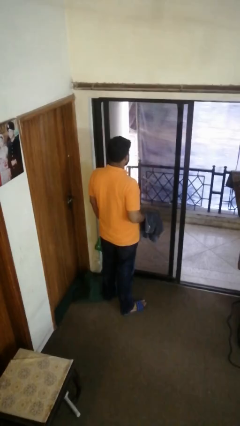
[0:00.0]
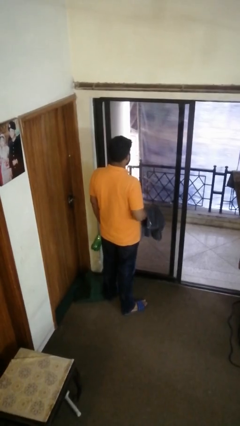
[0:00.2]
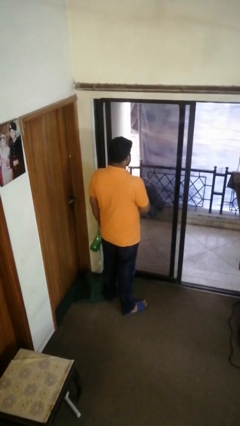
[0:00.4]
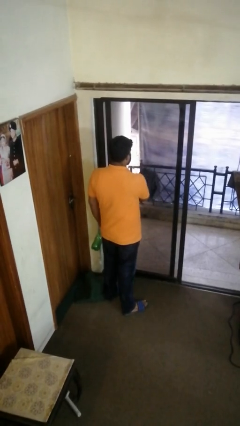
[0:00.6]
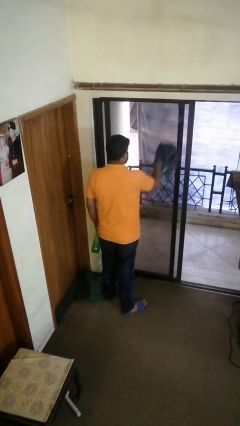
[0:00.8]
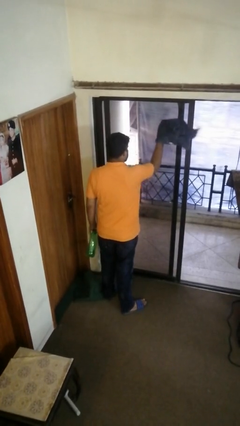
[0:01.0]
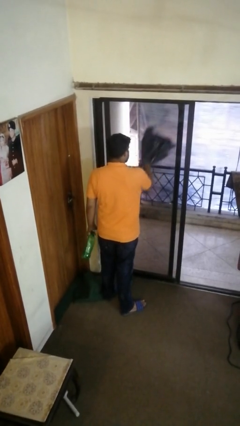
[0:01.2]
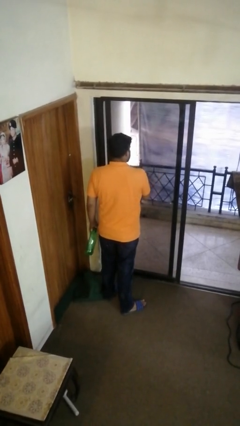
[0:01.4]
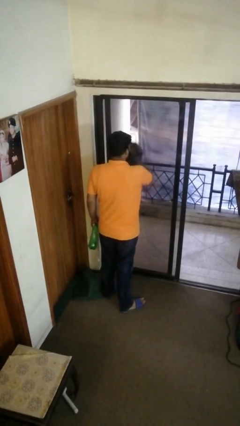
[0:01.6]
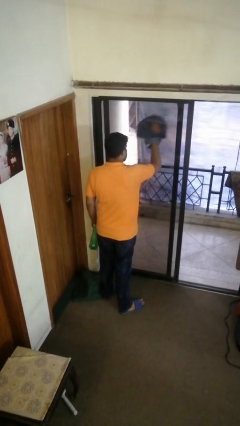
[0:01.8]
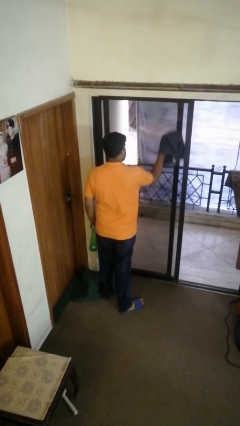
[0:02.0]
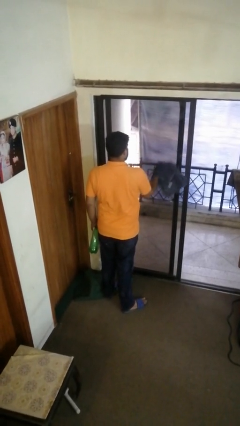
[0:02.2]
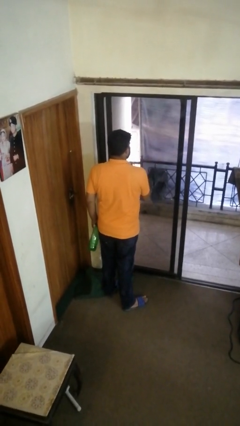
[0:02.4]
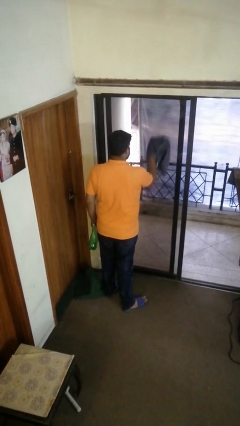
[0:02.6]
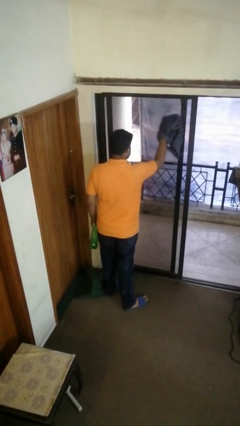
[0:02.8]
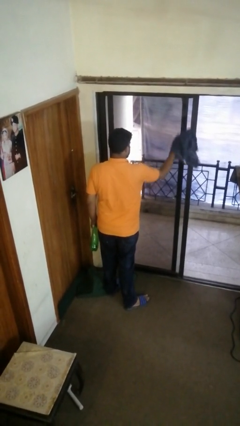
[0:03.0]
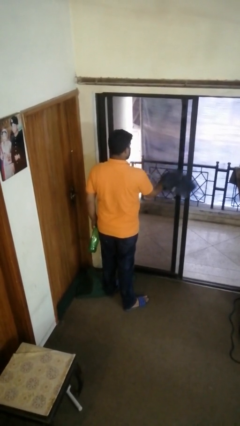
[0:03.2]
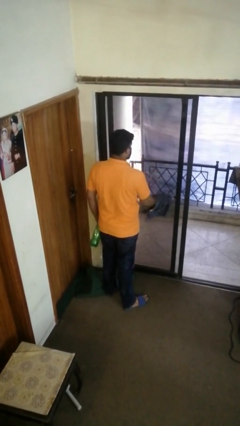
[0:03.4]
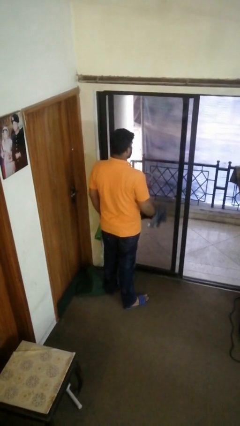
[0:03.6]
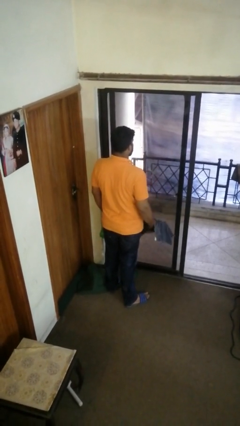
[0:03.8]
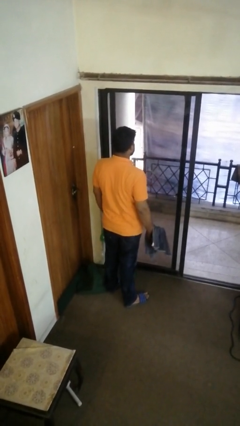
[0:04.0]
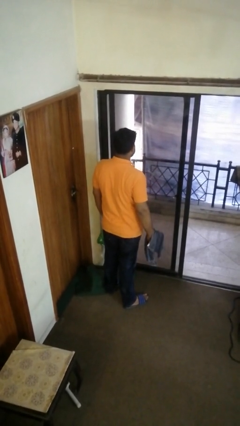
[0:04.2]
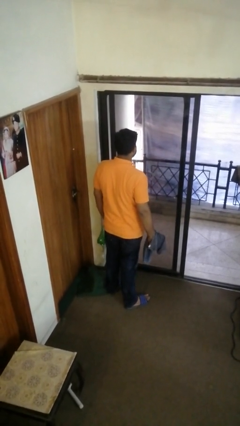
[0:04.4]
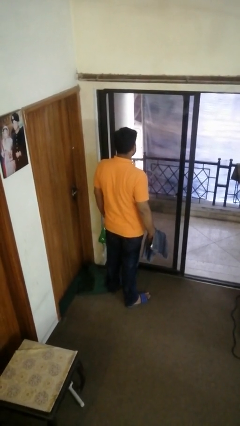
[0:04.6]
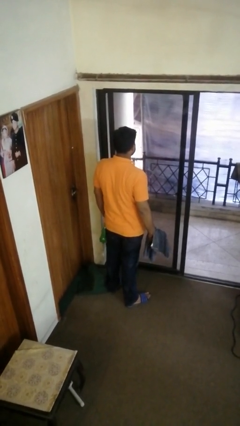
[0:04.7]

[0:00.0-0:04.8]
person washes window

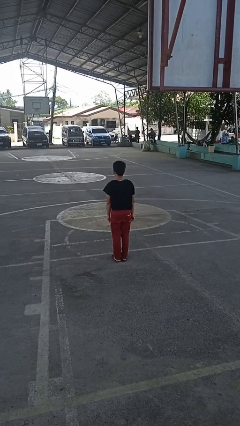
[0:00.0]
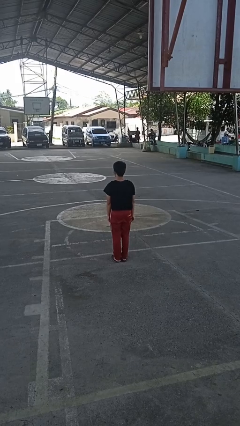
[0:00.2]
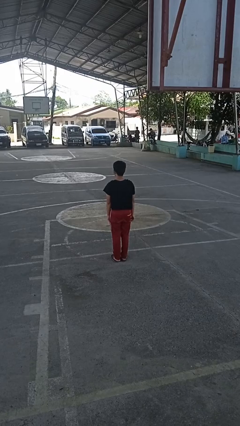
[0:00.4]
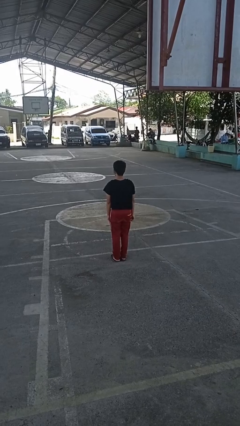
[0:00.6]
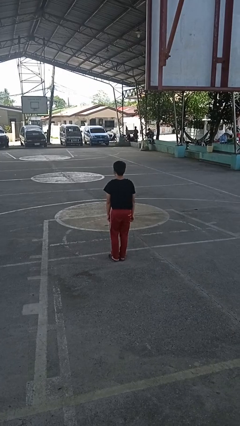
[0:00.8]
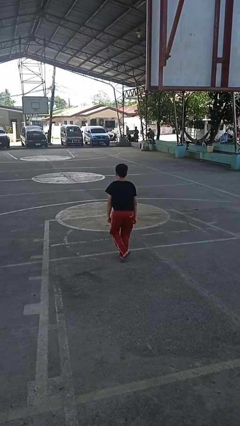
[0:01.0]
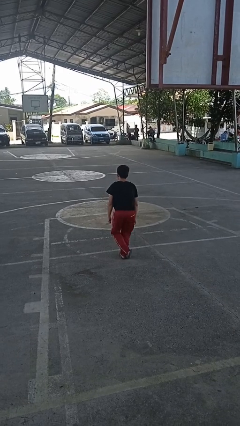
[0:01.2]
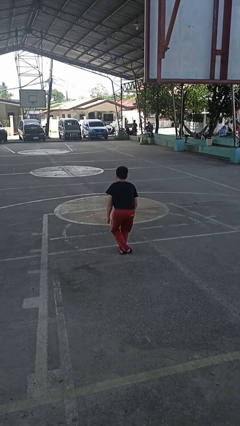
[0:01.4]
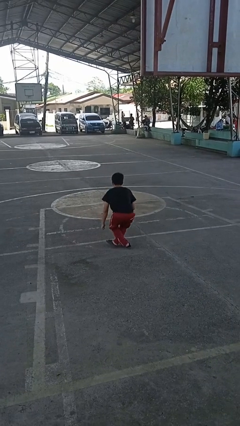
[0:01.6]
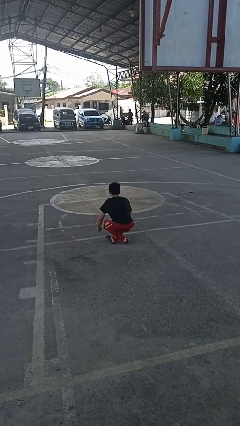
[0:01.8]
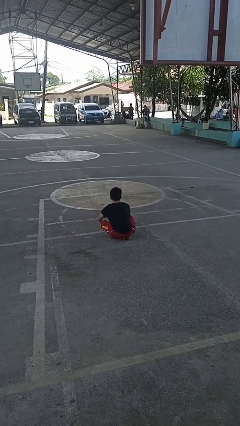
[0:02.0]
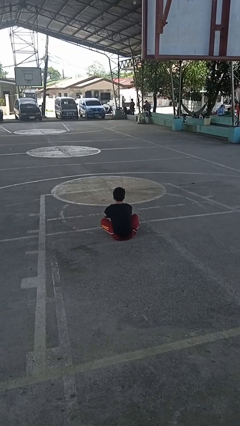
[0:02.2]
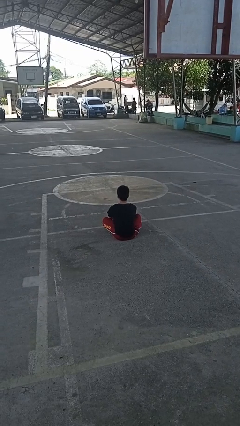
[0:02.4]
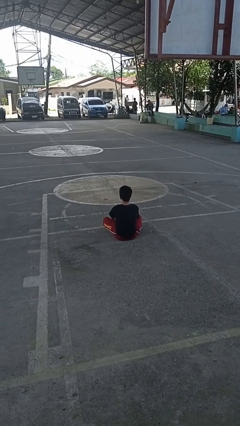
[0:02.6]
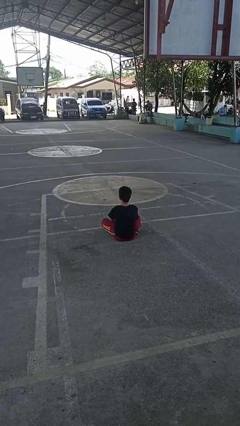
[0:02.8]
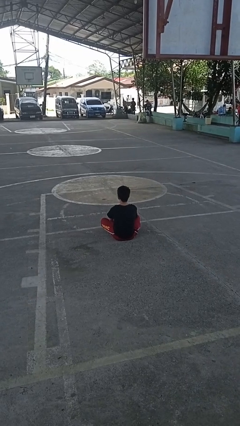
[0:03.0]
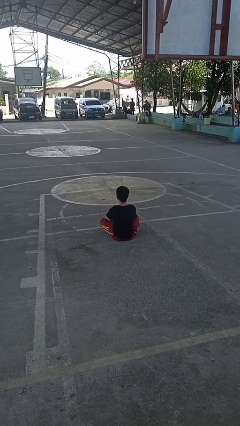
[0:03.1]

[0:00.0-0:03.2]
person sits crisscross

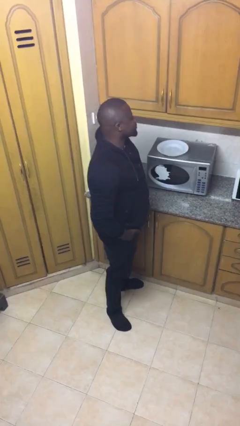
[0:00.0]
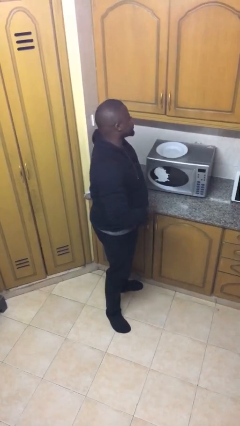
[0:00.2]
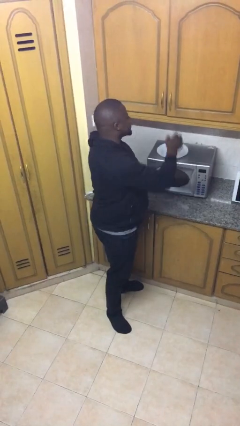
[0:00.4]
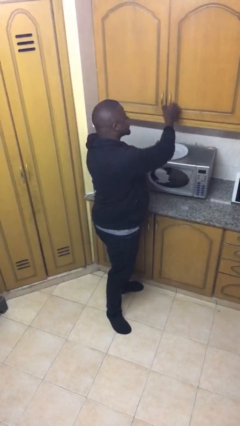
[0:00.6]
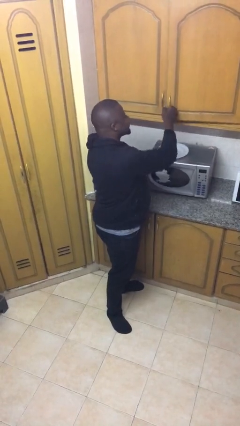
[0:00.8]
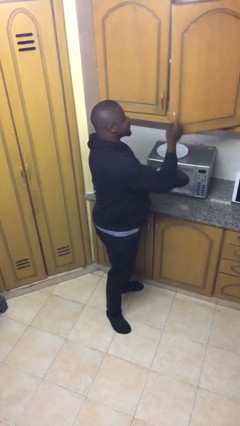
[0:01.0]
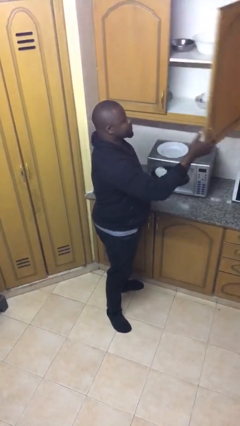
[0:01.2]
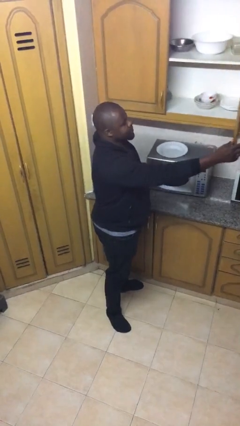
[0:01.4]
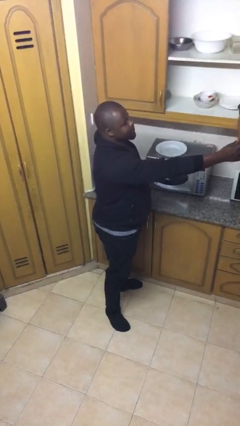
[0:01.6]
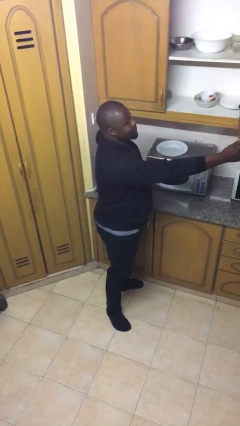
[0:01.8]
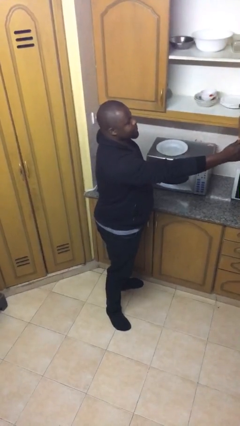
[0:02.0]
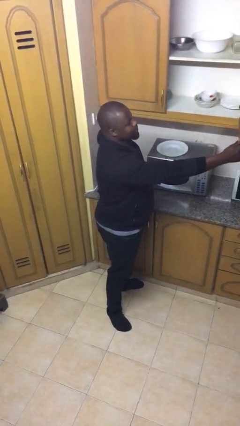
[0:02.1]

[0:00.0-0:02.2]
person opens cabinet

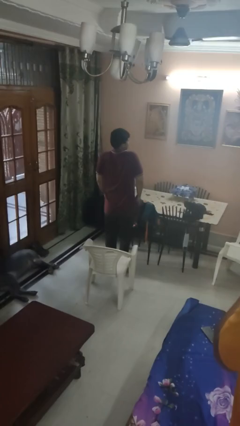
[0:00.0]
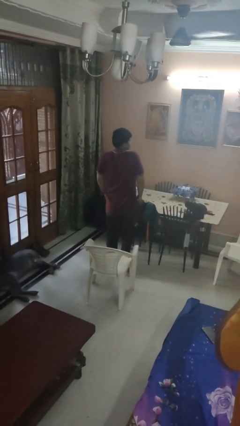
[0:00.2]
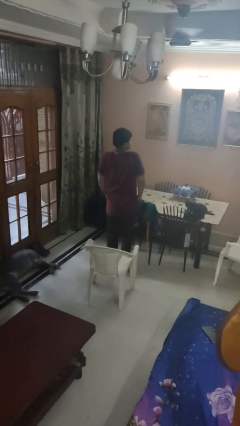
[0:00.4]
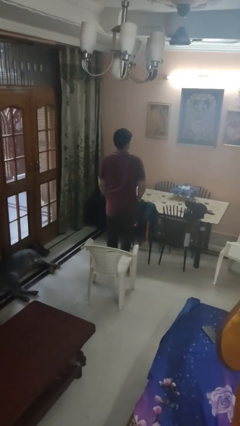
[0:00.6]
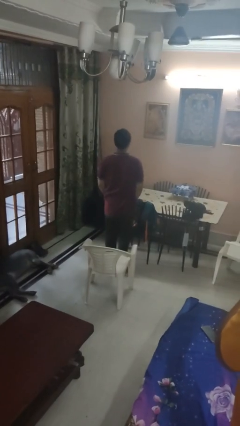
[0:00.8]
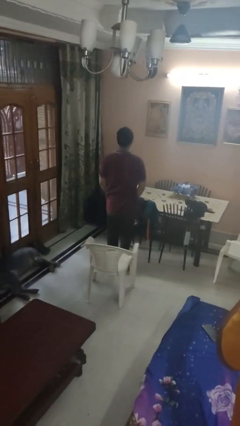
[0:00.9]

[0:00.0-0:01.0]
person shrugs

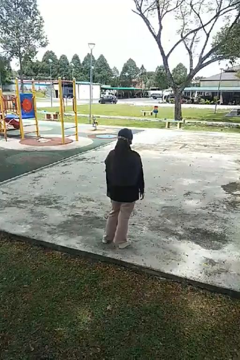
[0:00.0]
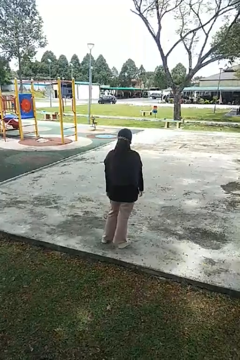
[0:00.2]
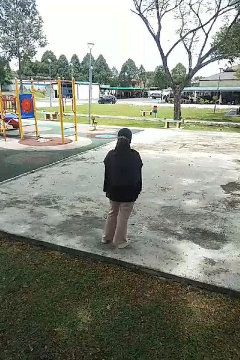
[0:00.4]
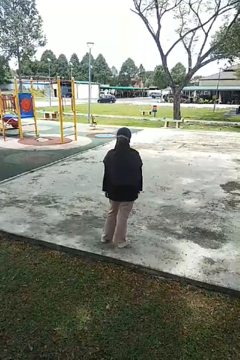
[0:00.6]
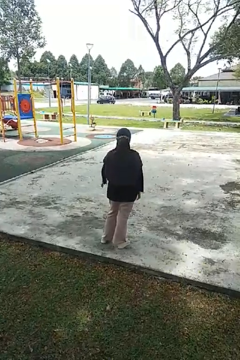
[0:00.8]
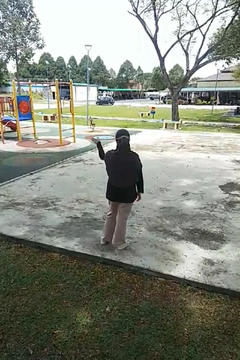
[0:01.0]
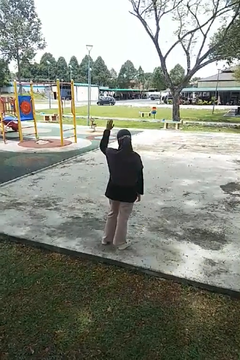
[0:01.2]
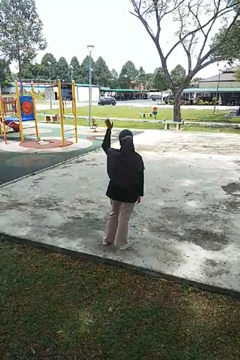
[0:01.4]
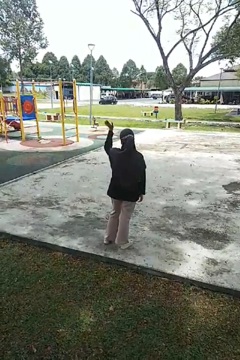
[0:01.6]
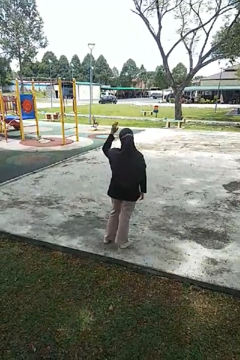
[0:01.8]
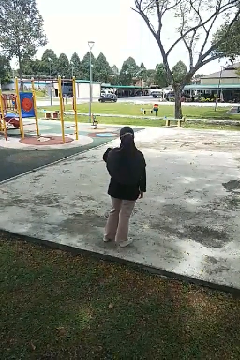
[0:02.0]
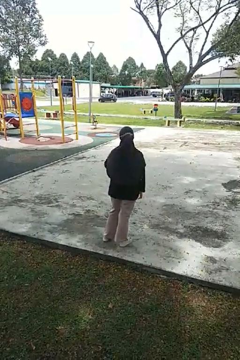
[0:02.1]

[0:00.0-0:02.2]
person waves at person

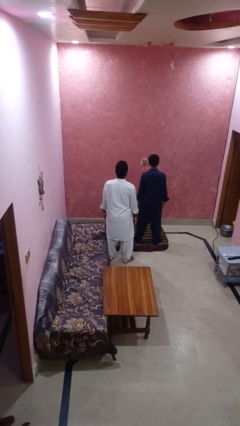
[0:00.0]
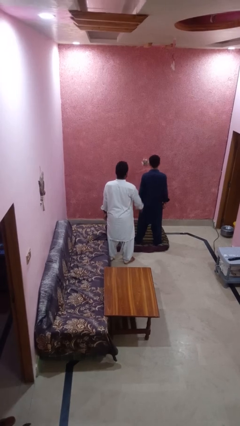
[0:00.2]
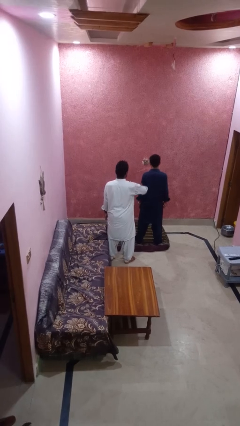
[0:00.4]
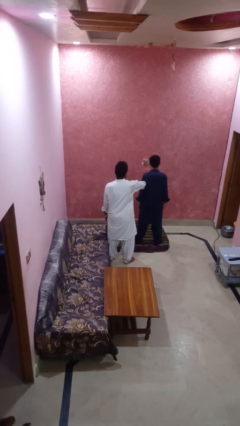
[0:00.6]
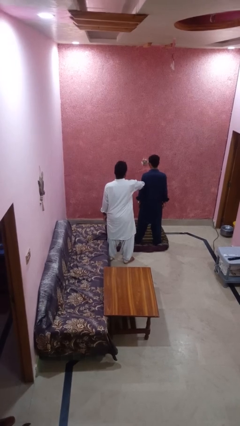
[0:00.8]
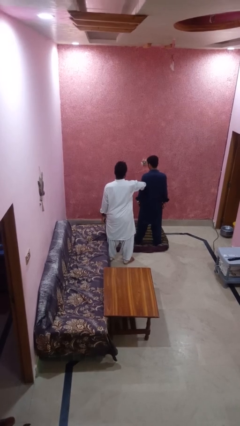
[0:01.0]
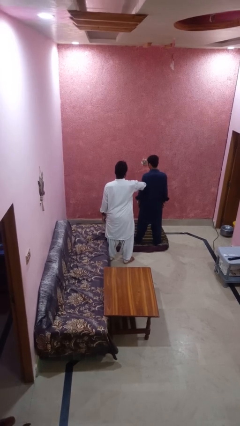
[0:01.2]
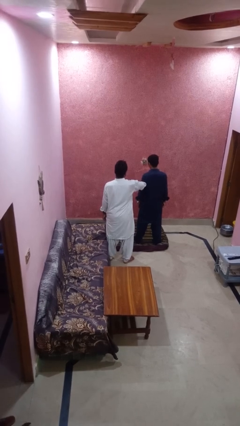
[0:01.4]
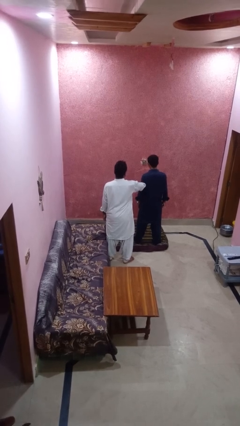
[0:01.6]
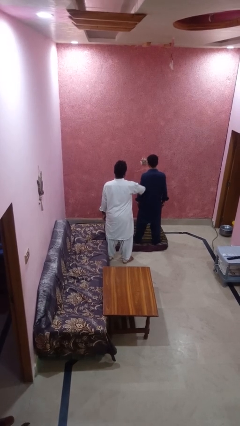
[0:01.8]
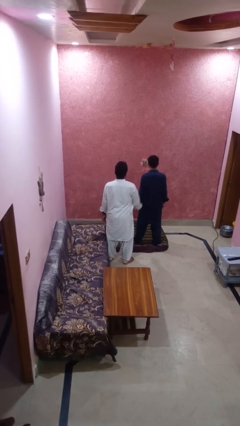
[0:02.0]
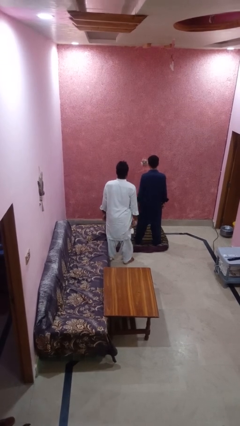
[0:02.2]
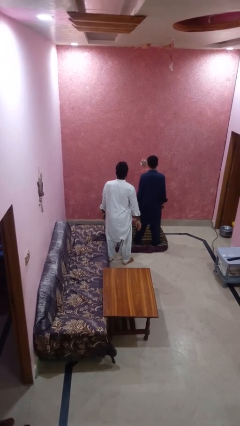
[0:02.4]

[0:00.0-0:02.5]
person grabs person by forearm

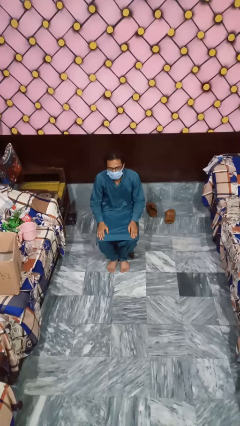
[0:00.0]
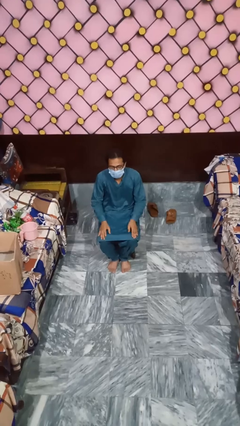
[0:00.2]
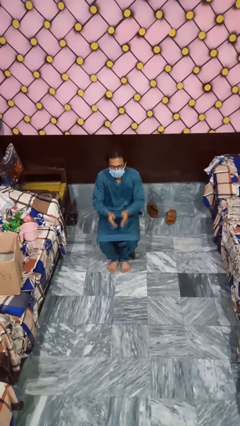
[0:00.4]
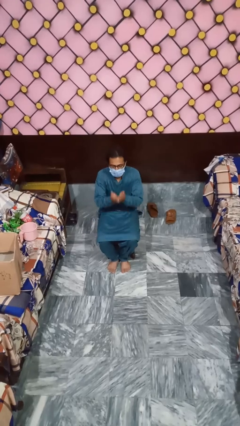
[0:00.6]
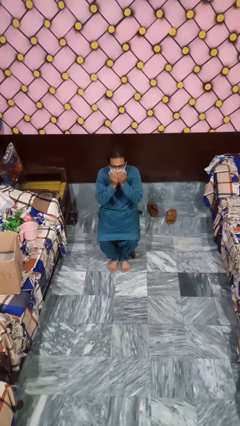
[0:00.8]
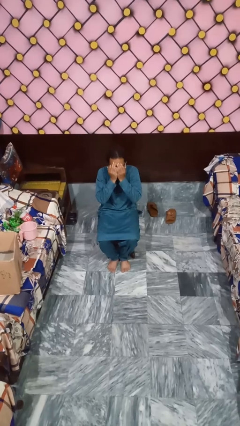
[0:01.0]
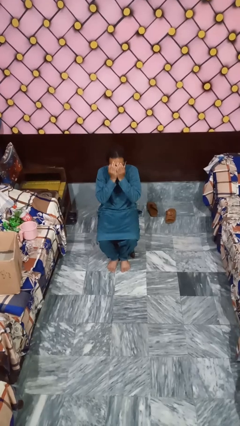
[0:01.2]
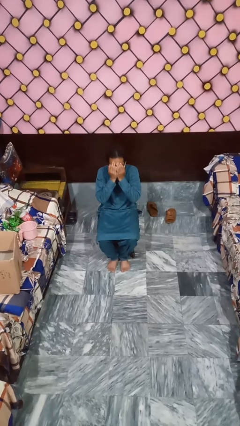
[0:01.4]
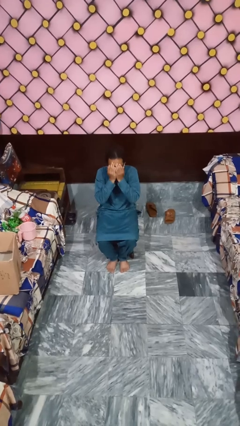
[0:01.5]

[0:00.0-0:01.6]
person covers face with hands
